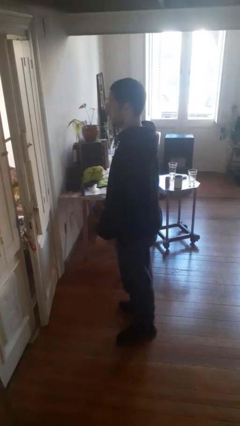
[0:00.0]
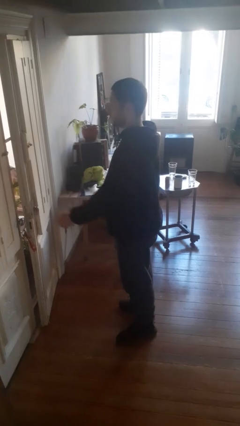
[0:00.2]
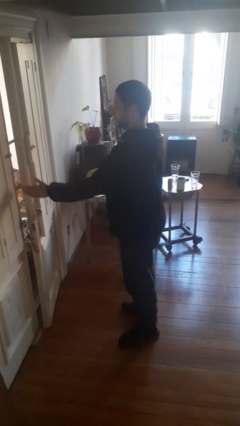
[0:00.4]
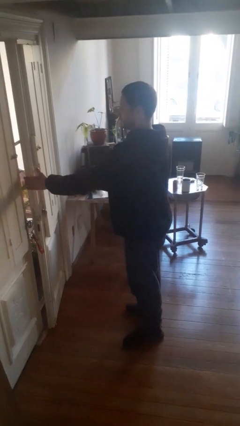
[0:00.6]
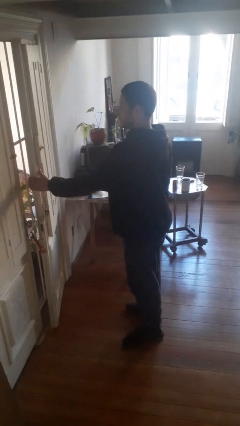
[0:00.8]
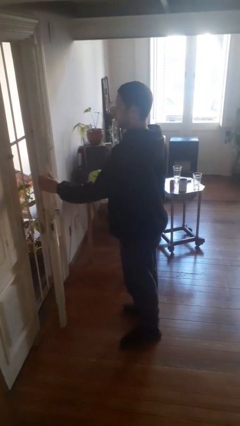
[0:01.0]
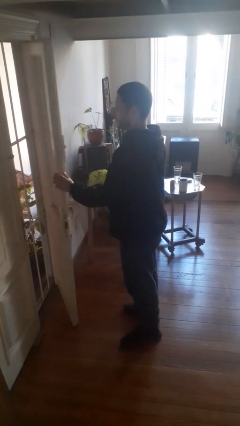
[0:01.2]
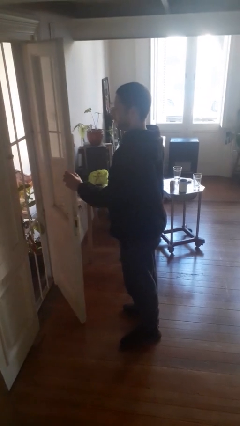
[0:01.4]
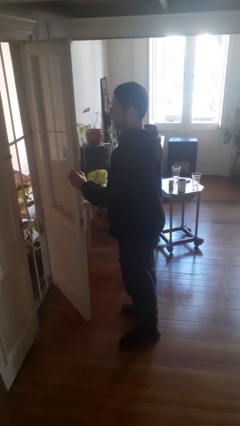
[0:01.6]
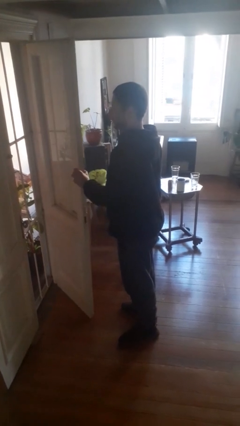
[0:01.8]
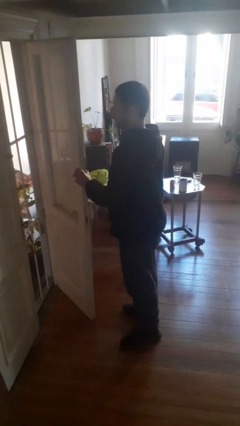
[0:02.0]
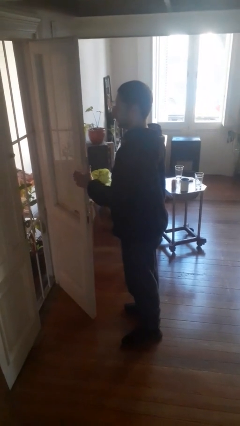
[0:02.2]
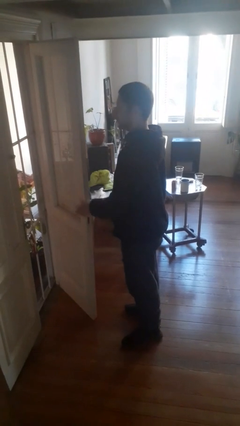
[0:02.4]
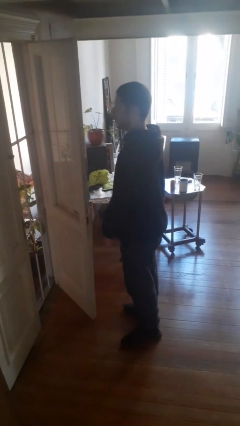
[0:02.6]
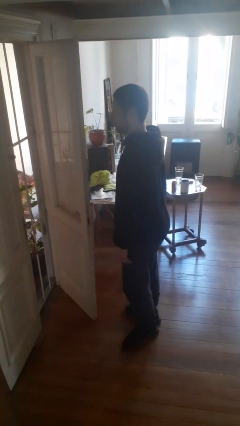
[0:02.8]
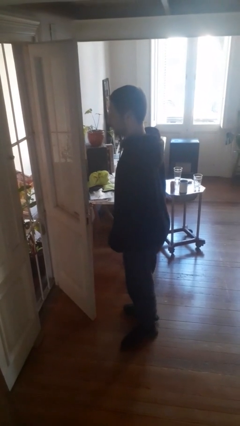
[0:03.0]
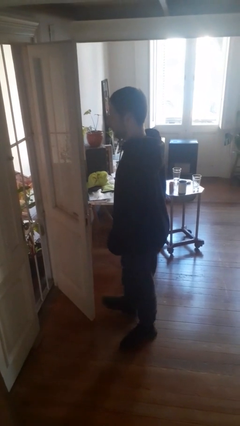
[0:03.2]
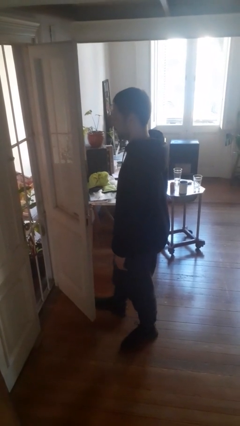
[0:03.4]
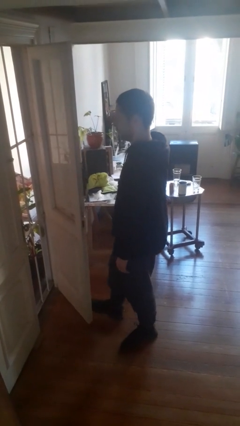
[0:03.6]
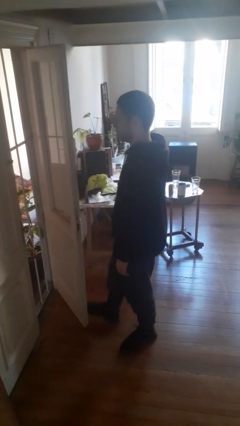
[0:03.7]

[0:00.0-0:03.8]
person opens facility door

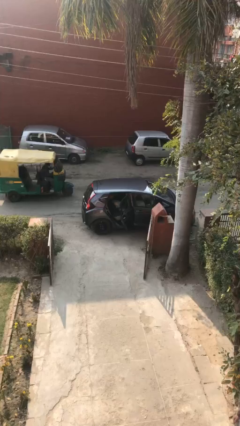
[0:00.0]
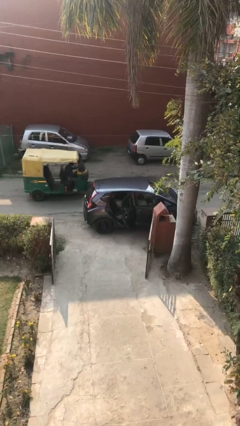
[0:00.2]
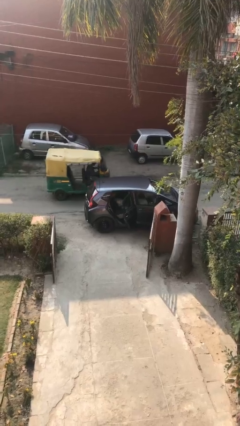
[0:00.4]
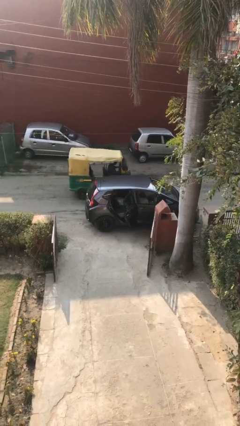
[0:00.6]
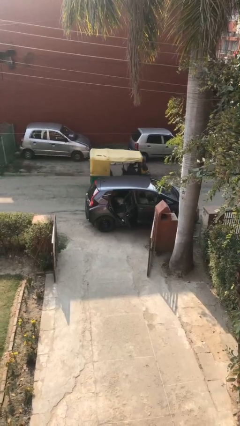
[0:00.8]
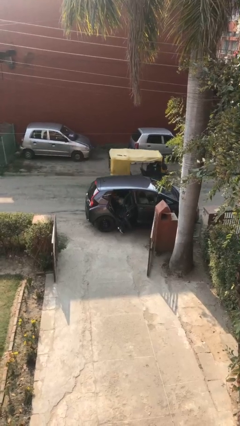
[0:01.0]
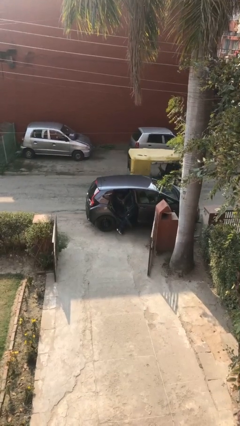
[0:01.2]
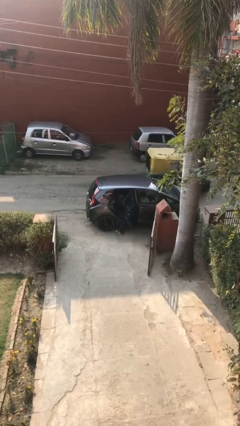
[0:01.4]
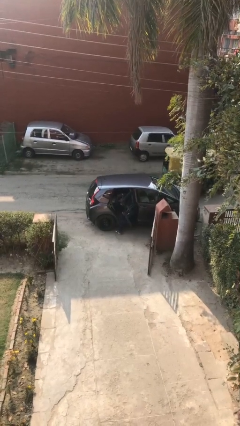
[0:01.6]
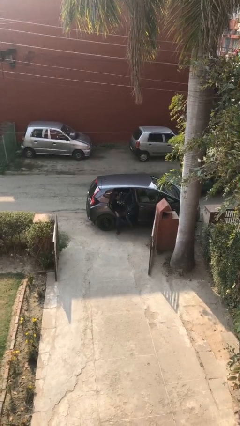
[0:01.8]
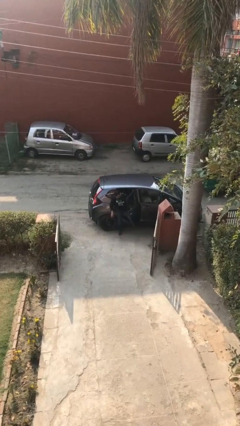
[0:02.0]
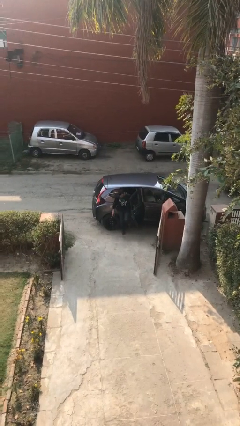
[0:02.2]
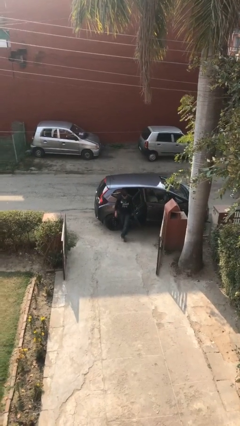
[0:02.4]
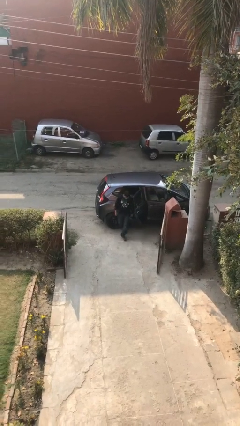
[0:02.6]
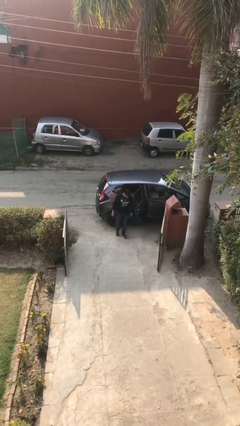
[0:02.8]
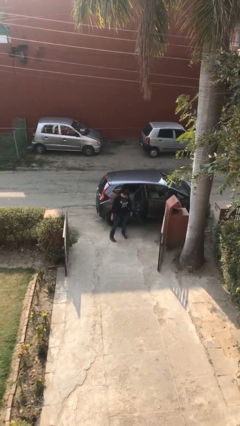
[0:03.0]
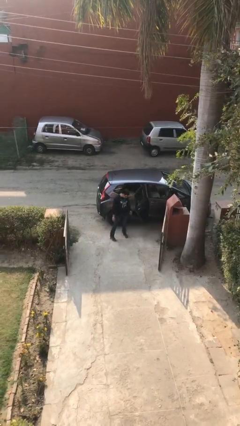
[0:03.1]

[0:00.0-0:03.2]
person exits car

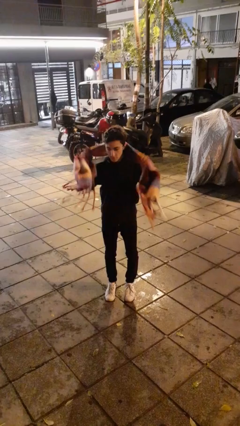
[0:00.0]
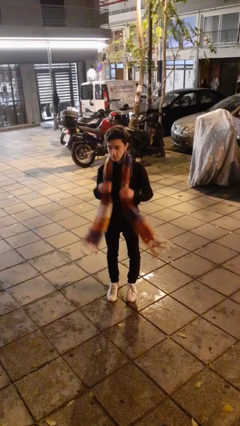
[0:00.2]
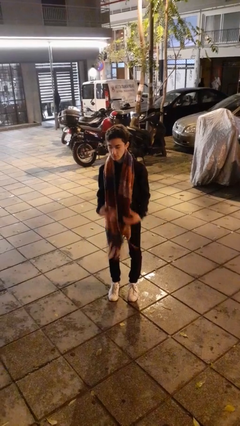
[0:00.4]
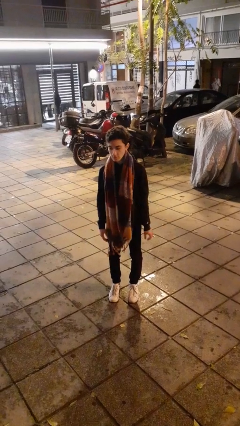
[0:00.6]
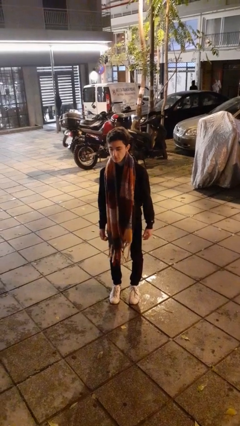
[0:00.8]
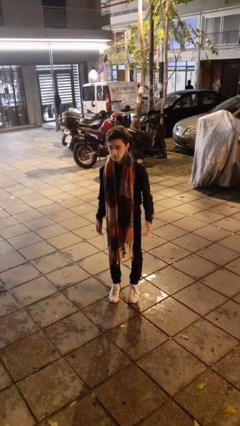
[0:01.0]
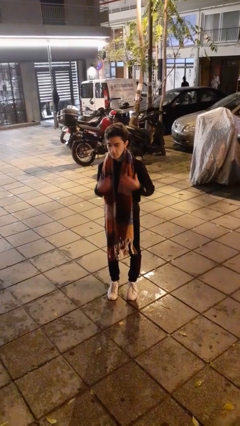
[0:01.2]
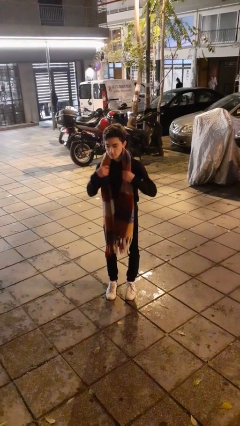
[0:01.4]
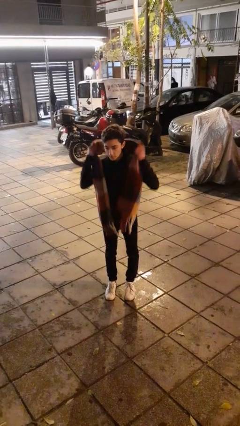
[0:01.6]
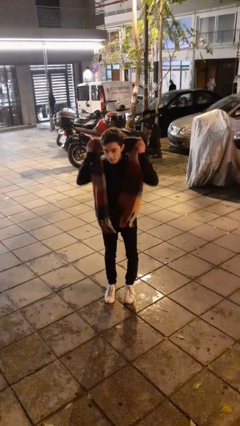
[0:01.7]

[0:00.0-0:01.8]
person puts on scarf

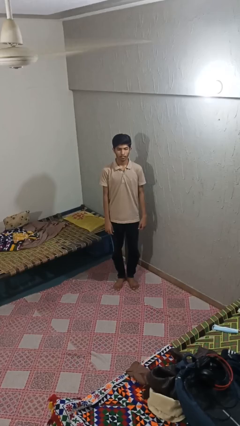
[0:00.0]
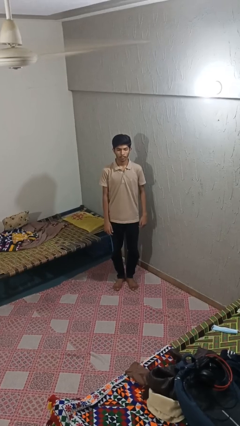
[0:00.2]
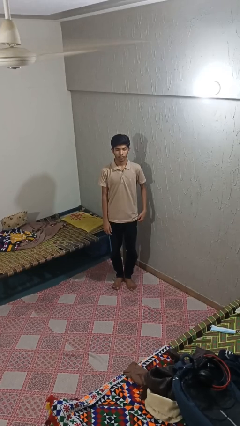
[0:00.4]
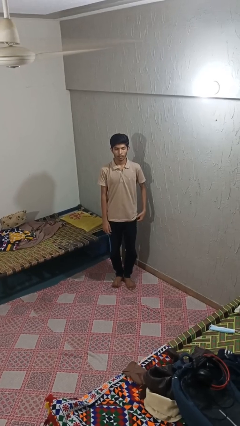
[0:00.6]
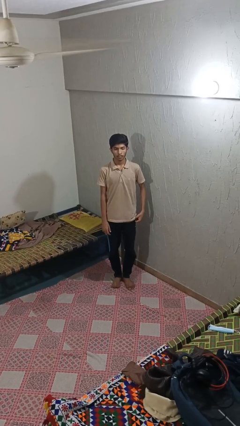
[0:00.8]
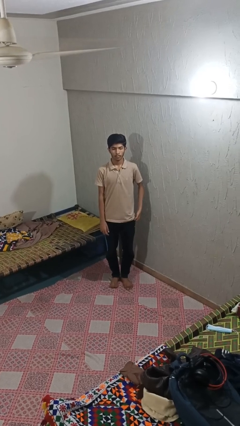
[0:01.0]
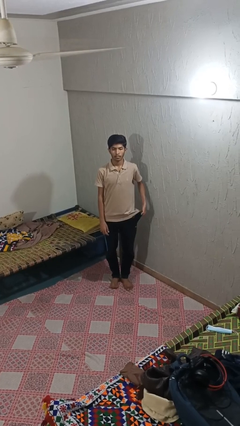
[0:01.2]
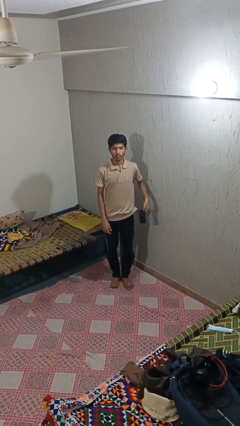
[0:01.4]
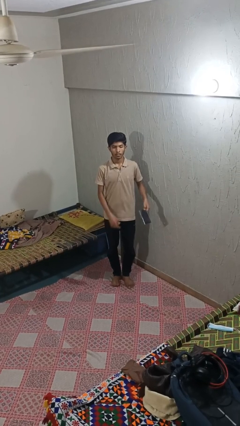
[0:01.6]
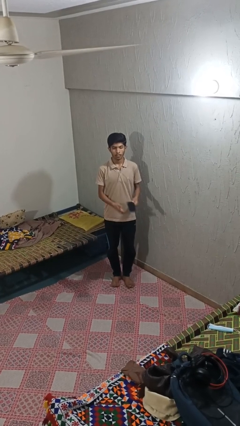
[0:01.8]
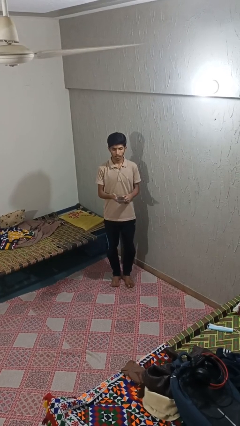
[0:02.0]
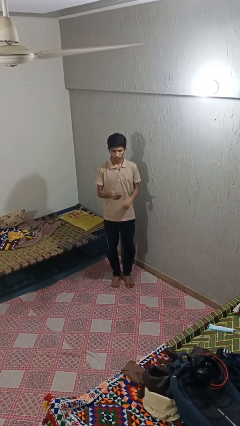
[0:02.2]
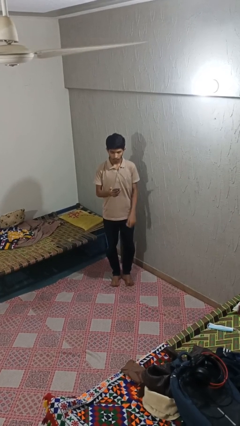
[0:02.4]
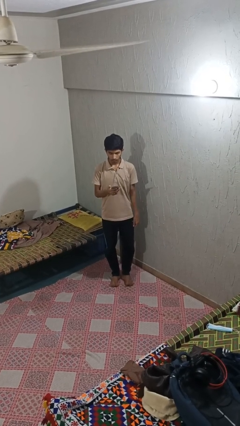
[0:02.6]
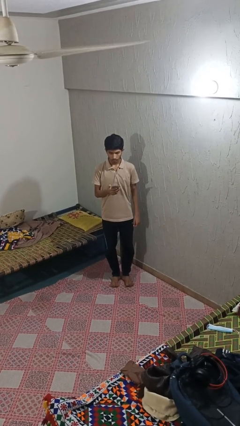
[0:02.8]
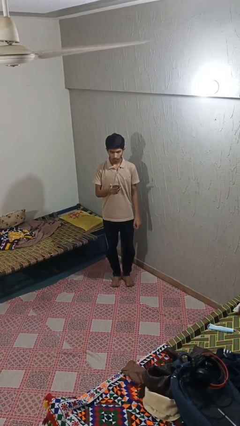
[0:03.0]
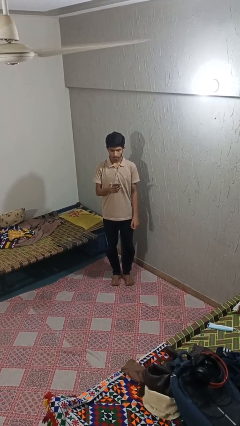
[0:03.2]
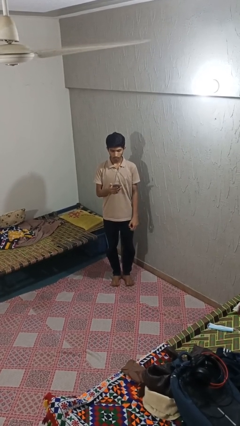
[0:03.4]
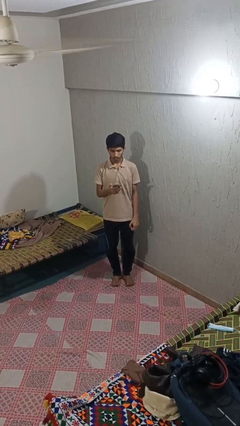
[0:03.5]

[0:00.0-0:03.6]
person takes phone from pocket

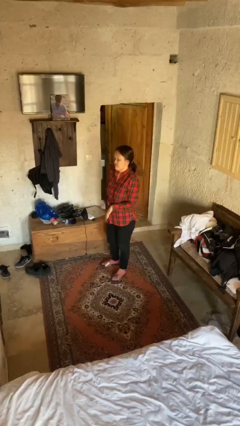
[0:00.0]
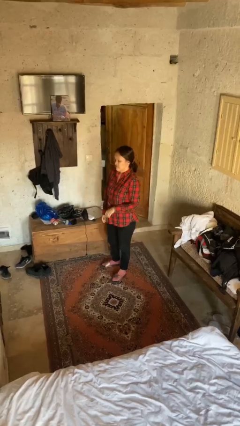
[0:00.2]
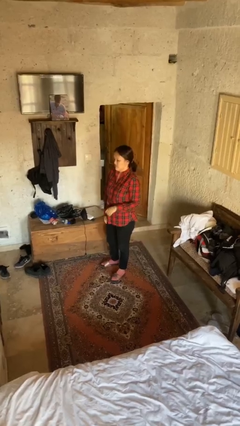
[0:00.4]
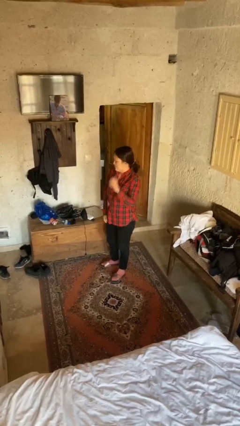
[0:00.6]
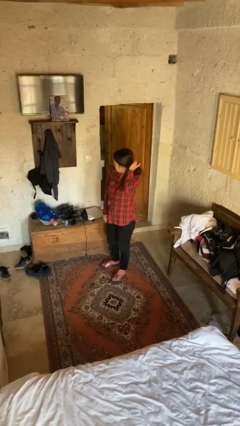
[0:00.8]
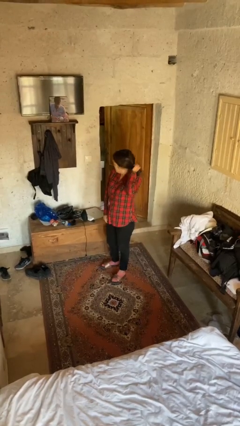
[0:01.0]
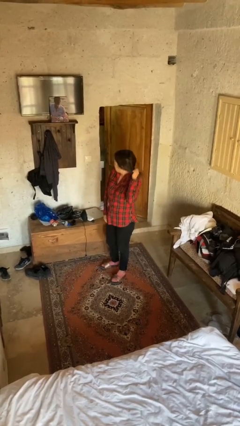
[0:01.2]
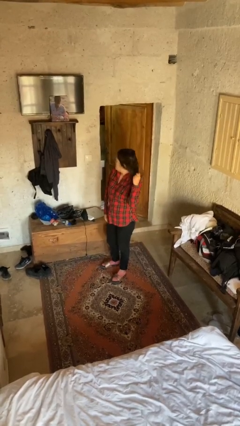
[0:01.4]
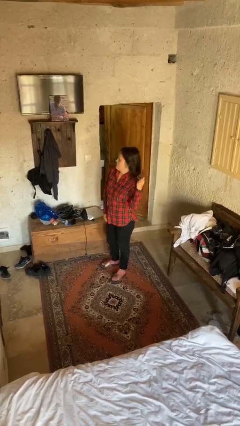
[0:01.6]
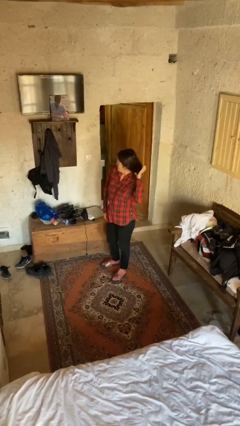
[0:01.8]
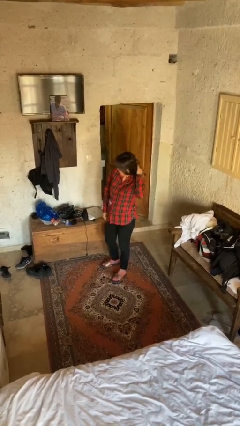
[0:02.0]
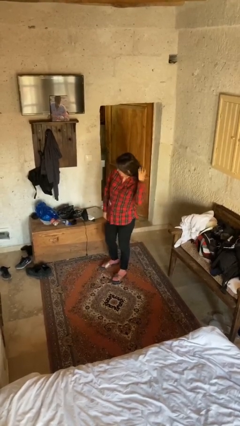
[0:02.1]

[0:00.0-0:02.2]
person takes off hairtie

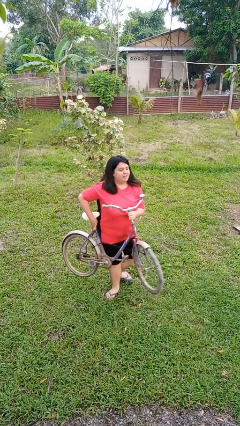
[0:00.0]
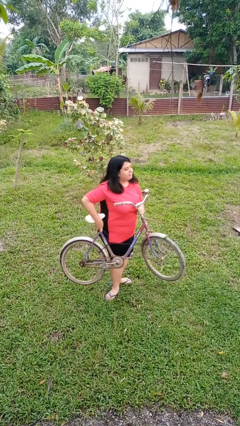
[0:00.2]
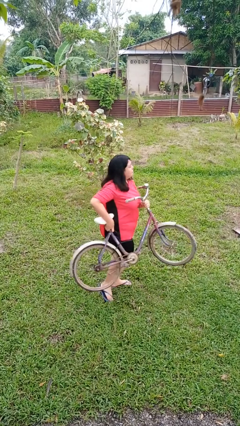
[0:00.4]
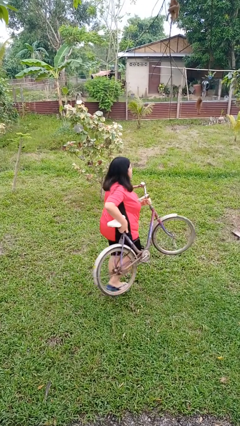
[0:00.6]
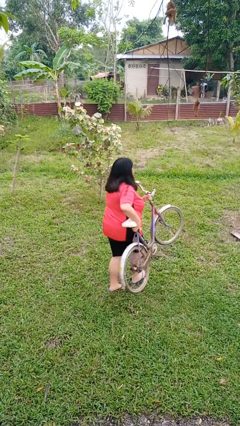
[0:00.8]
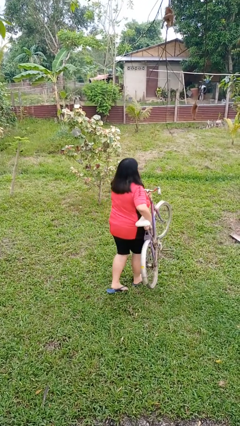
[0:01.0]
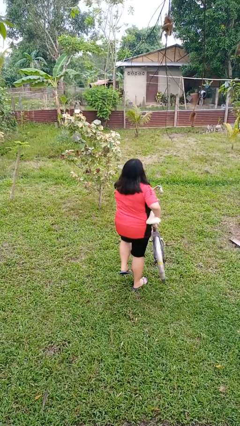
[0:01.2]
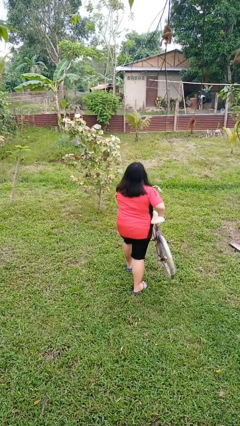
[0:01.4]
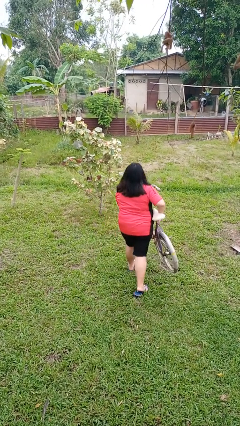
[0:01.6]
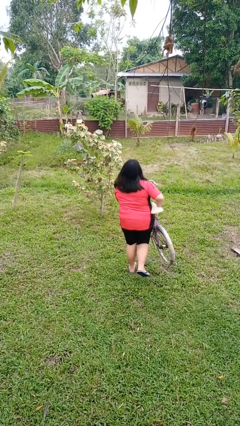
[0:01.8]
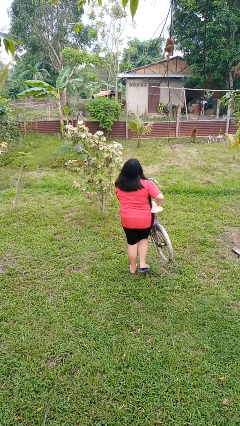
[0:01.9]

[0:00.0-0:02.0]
person carries bicycle
